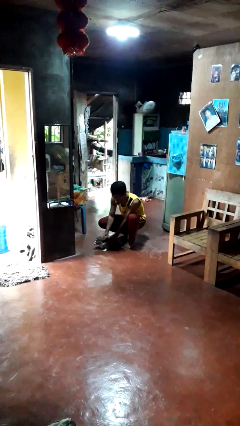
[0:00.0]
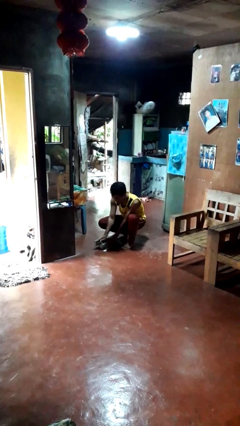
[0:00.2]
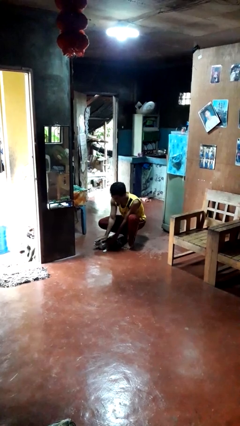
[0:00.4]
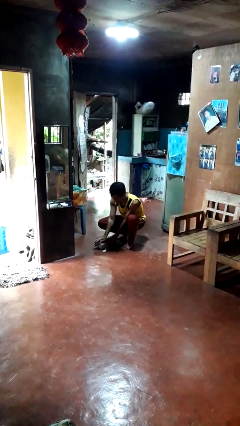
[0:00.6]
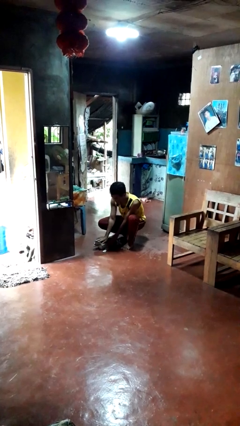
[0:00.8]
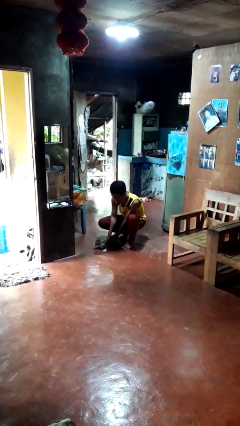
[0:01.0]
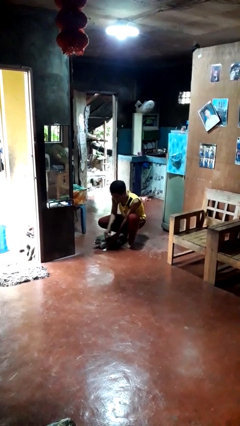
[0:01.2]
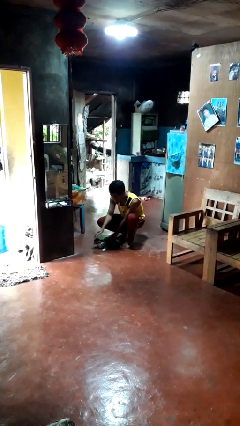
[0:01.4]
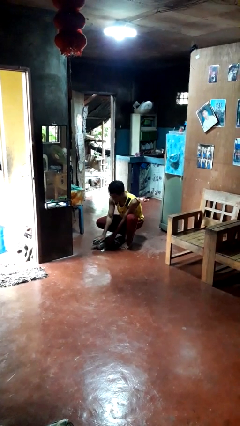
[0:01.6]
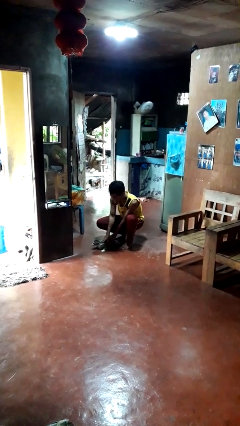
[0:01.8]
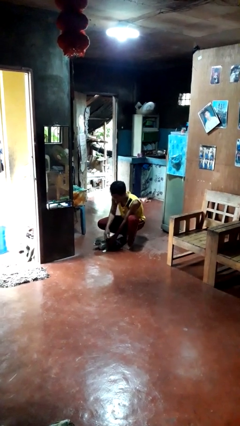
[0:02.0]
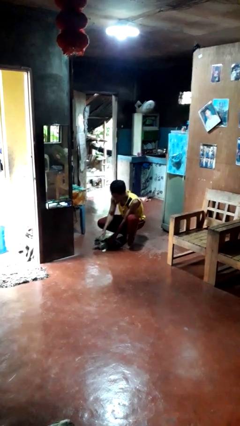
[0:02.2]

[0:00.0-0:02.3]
person pets cat

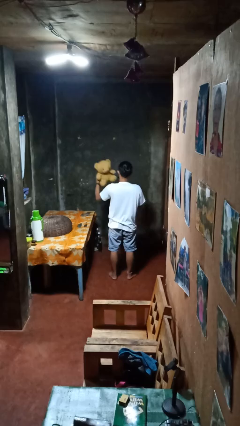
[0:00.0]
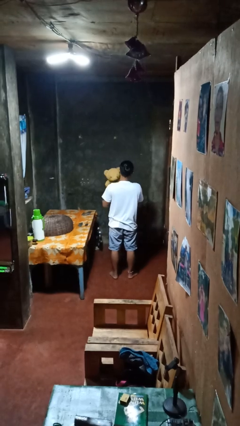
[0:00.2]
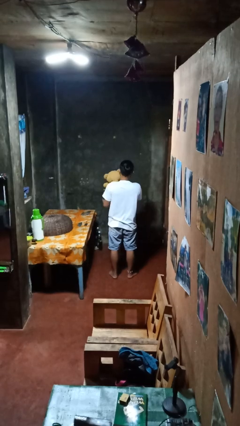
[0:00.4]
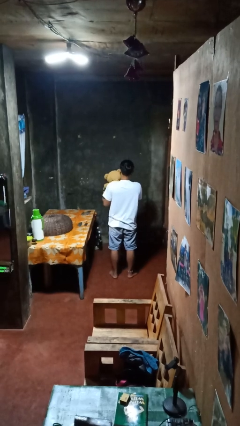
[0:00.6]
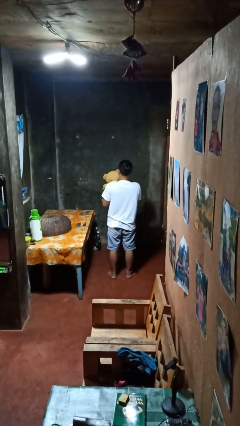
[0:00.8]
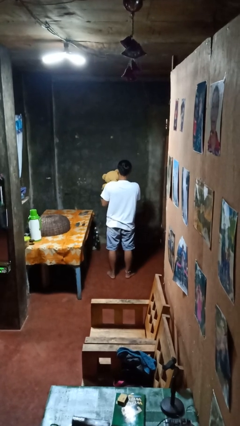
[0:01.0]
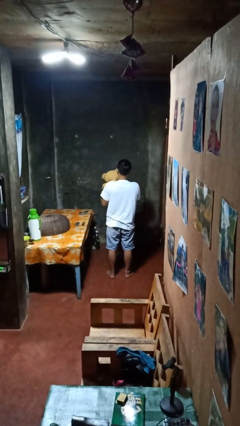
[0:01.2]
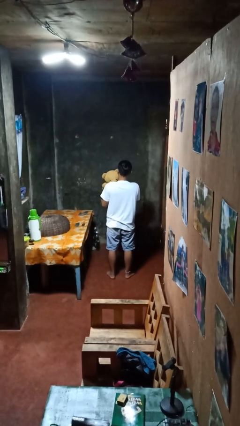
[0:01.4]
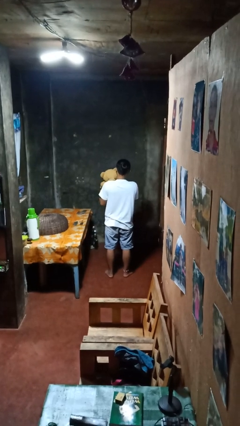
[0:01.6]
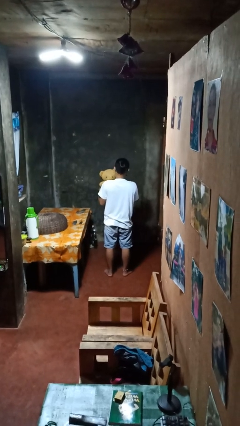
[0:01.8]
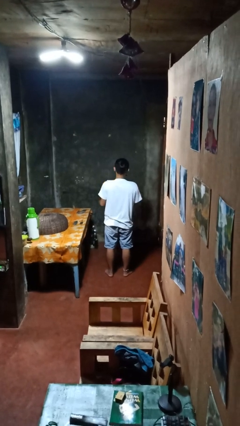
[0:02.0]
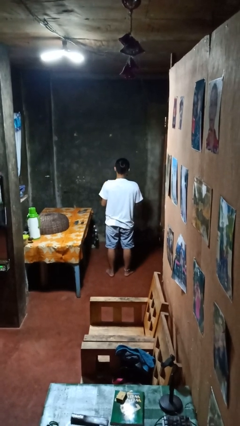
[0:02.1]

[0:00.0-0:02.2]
person hugs stuffed animal

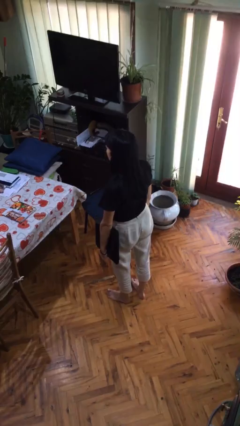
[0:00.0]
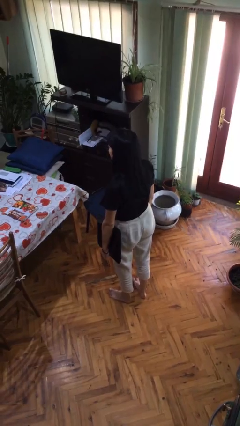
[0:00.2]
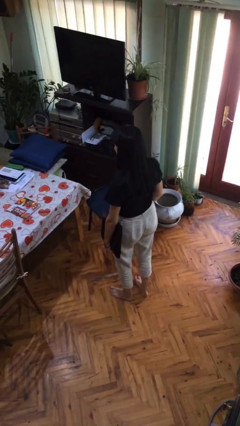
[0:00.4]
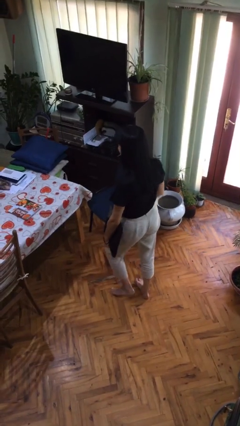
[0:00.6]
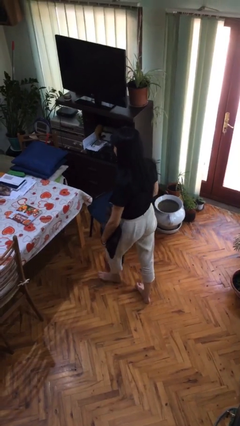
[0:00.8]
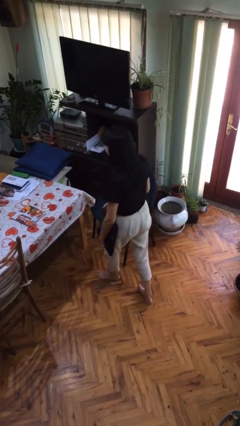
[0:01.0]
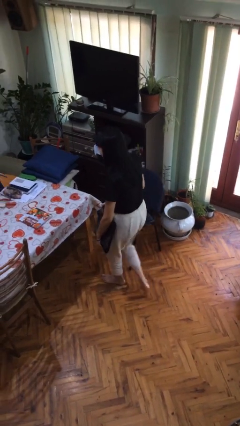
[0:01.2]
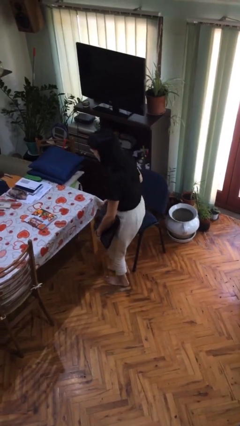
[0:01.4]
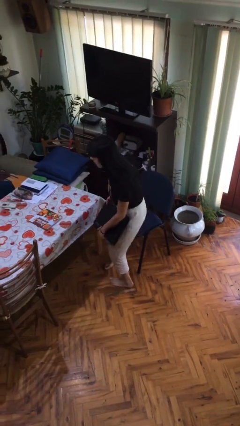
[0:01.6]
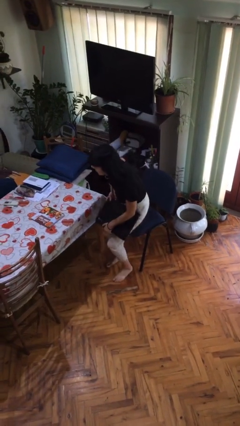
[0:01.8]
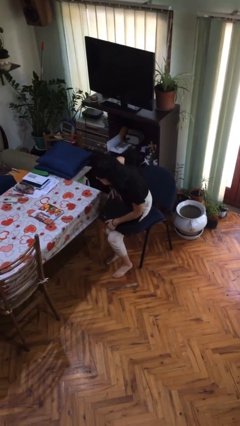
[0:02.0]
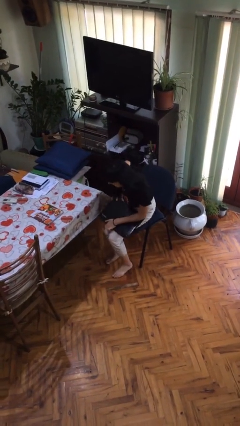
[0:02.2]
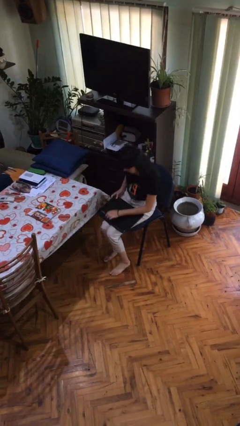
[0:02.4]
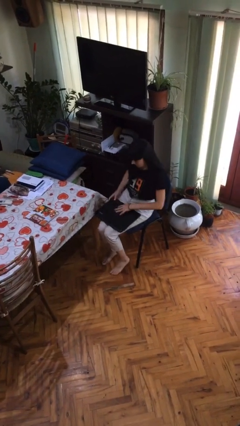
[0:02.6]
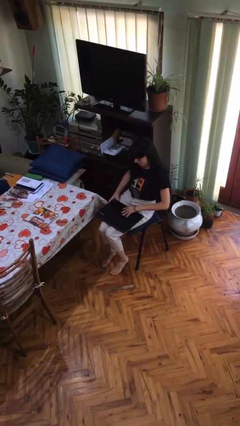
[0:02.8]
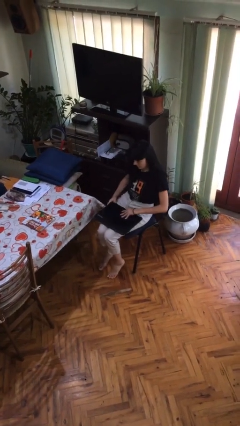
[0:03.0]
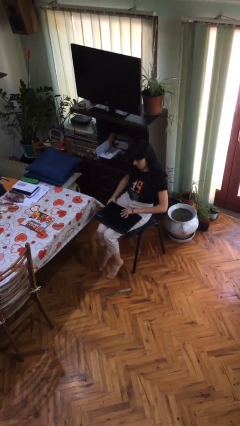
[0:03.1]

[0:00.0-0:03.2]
person sits down

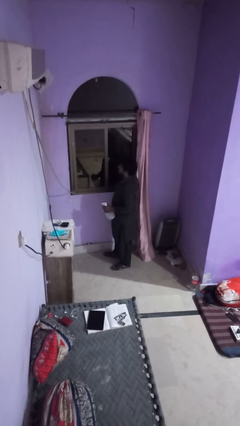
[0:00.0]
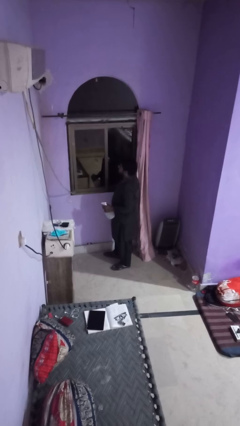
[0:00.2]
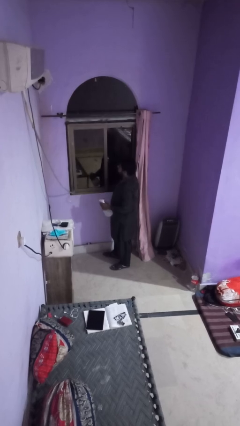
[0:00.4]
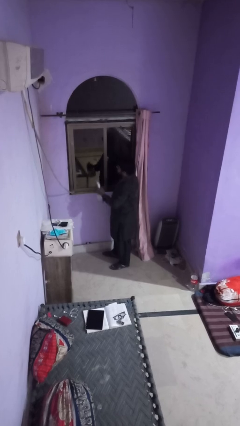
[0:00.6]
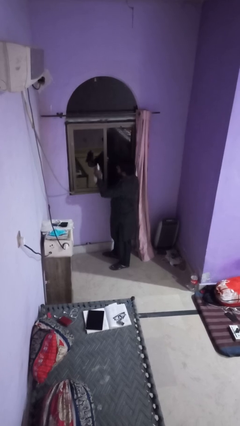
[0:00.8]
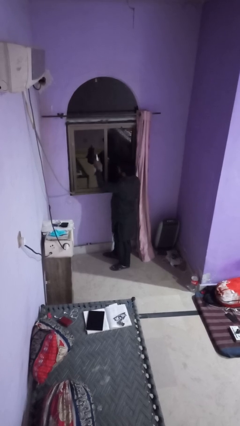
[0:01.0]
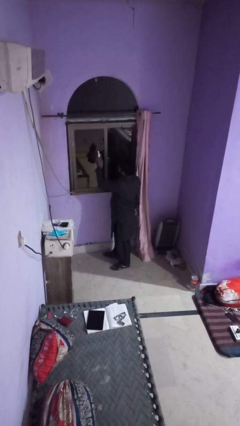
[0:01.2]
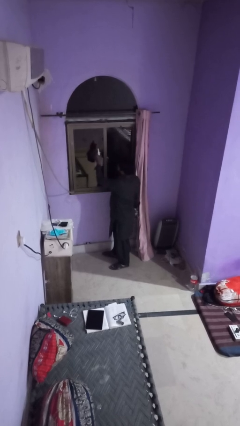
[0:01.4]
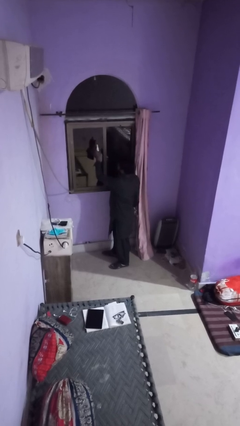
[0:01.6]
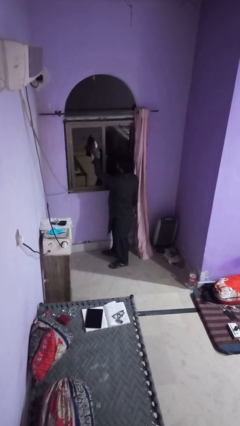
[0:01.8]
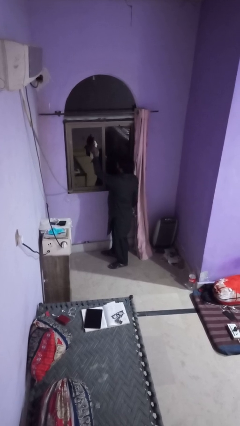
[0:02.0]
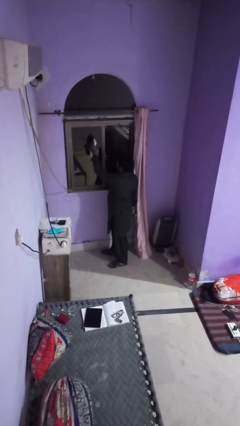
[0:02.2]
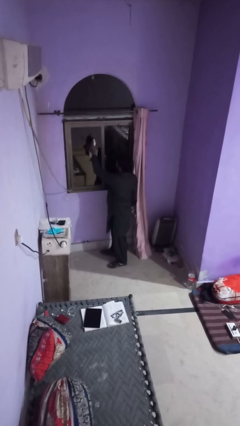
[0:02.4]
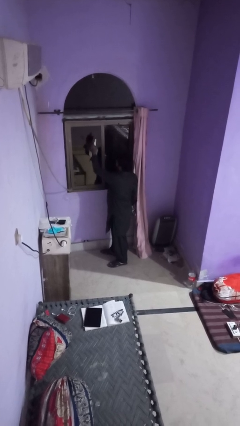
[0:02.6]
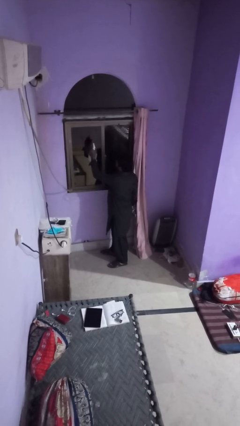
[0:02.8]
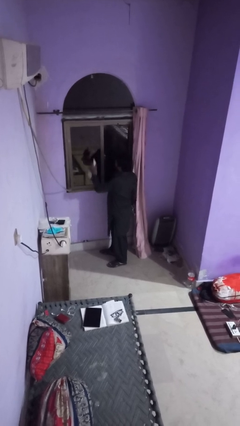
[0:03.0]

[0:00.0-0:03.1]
person sprays from bottle

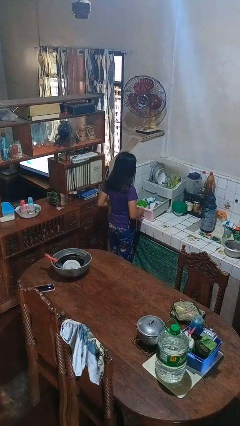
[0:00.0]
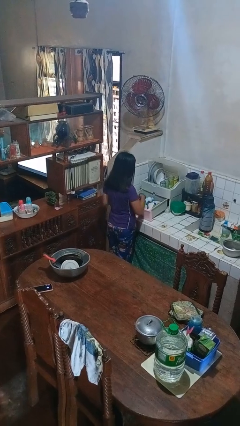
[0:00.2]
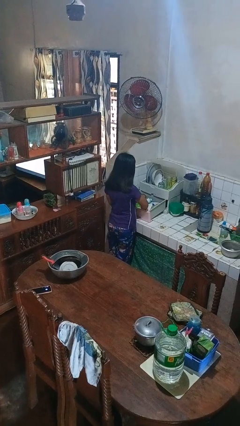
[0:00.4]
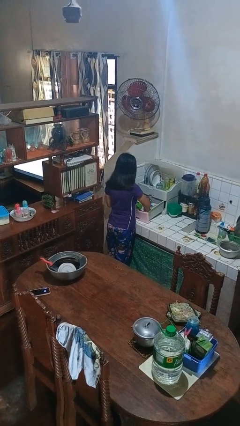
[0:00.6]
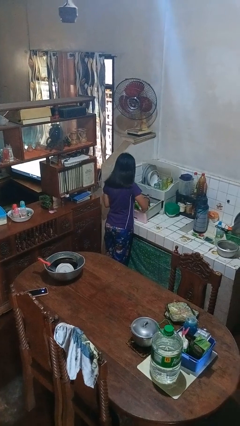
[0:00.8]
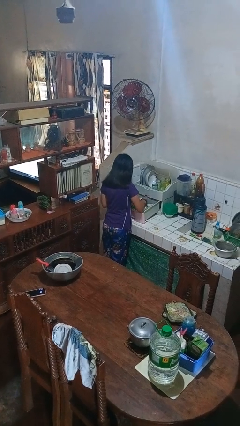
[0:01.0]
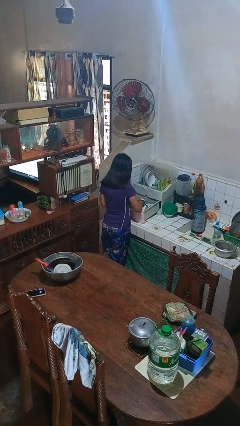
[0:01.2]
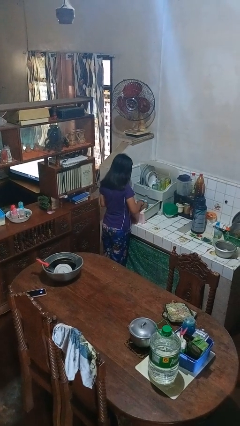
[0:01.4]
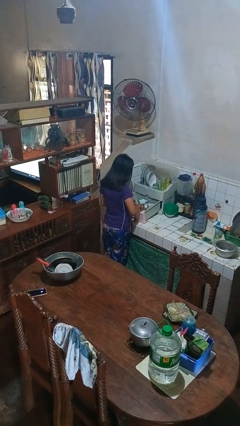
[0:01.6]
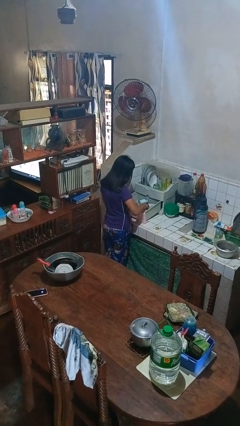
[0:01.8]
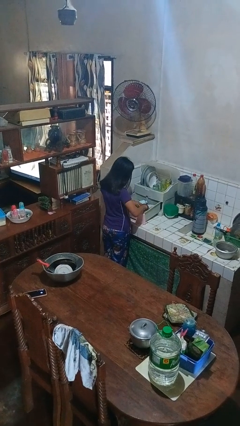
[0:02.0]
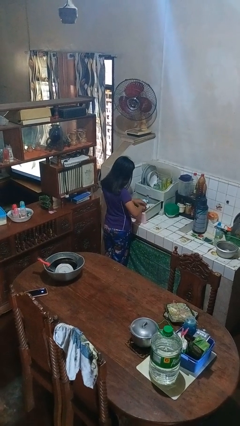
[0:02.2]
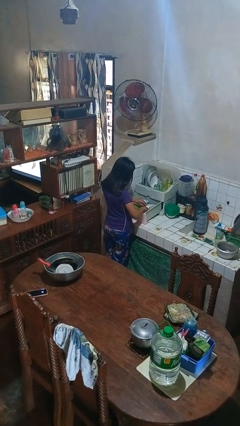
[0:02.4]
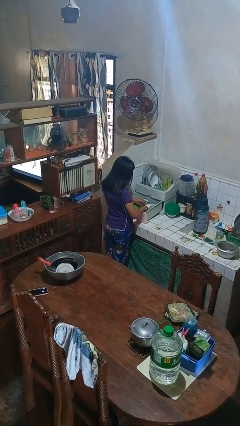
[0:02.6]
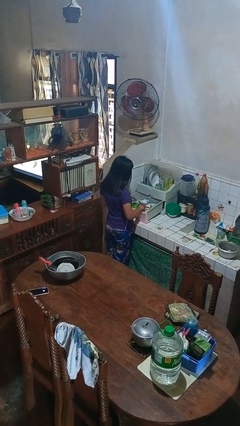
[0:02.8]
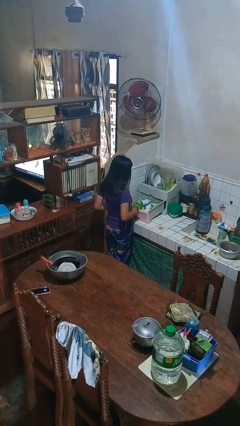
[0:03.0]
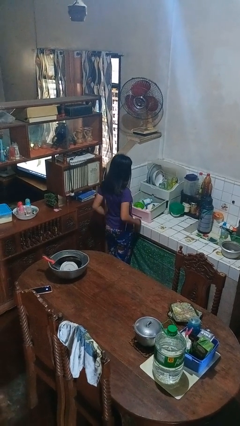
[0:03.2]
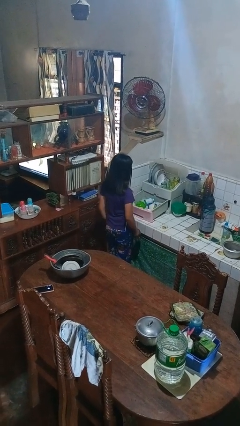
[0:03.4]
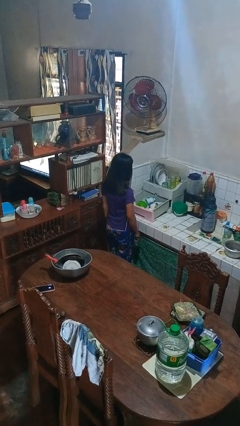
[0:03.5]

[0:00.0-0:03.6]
person searches in kitchen drawer

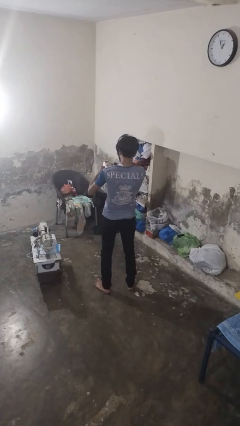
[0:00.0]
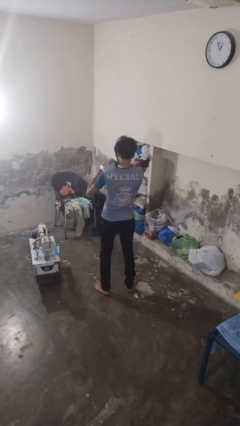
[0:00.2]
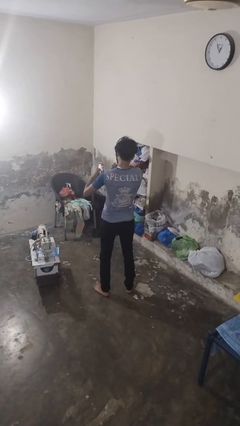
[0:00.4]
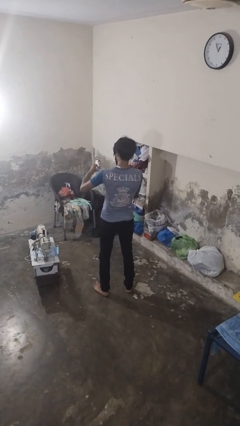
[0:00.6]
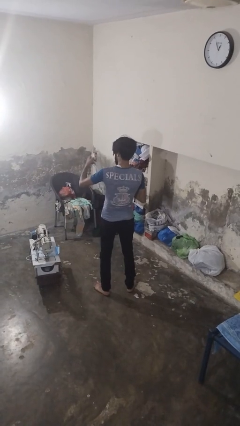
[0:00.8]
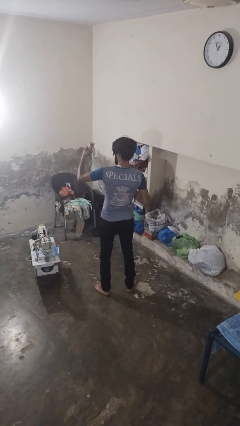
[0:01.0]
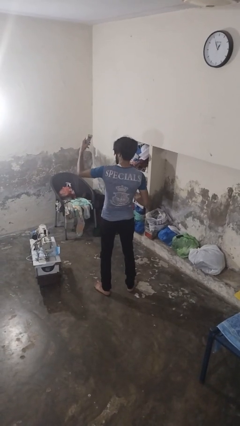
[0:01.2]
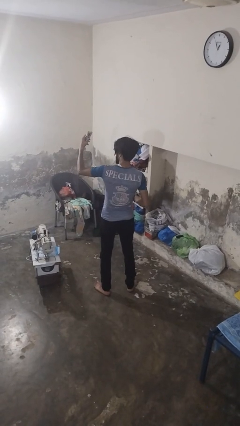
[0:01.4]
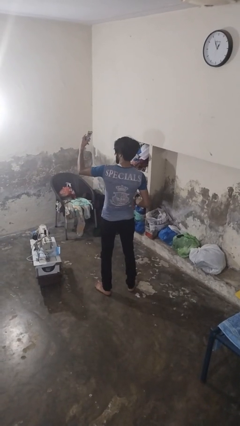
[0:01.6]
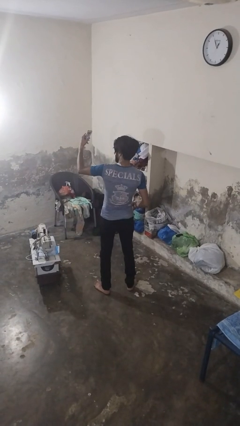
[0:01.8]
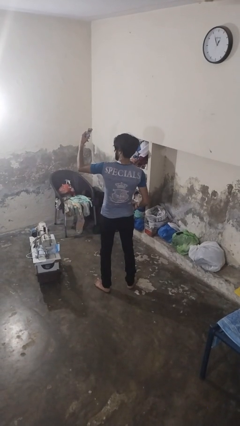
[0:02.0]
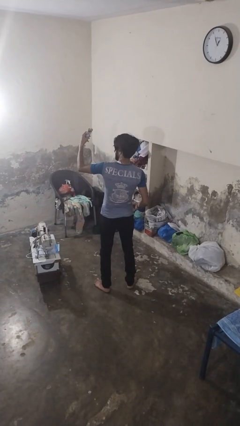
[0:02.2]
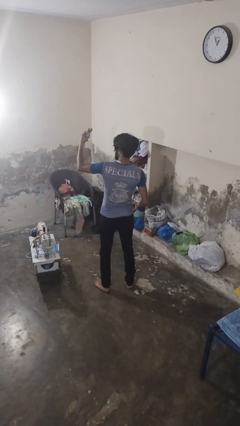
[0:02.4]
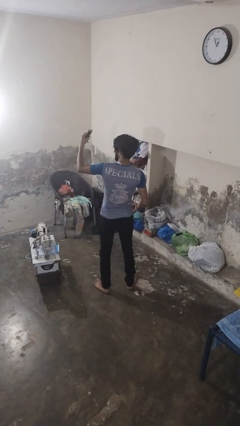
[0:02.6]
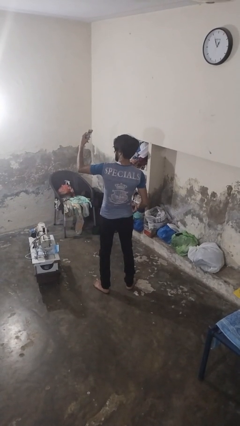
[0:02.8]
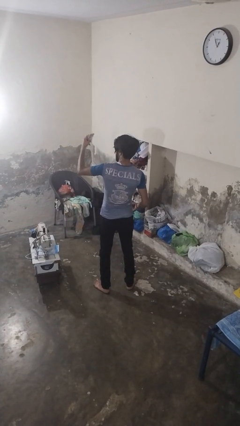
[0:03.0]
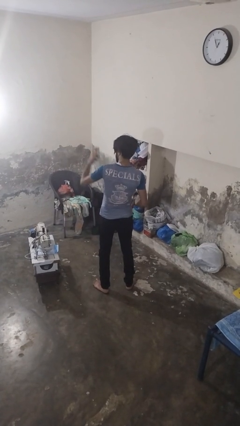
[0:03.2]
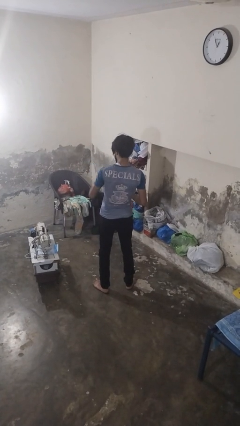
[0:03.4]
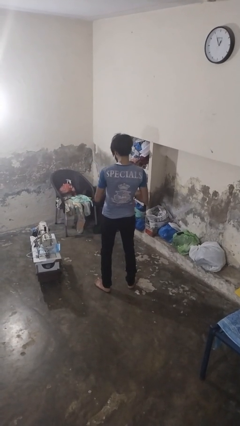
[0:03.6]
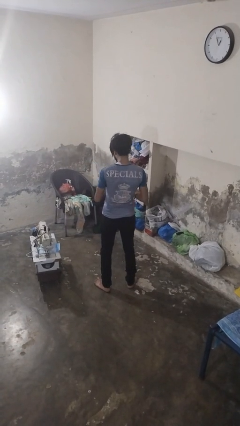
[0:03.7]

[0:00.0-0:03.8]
person takes selfie
